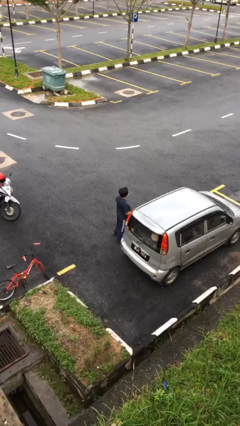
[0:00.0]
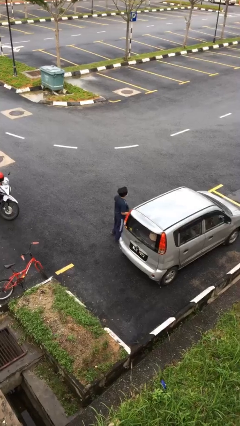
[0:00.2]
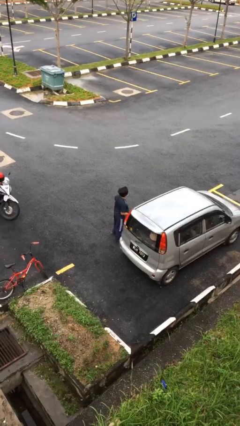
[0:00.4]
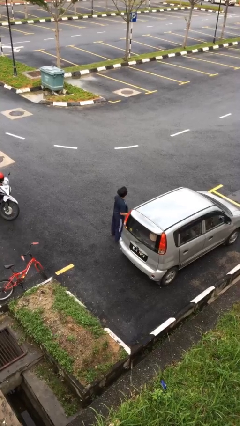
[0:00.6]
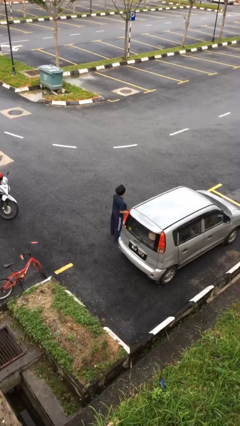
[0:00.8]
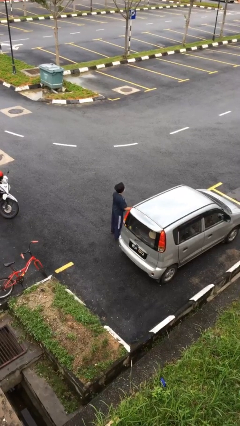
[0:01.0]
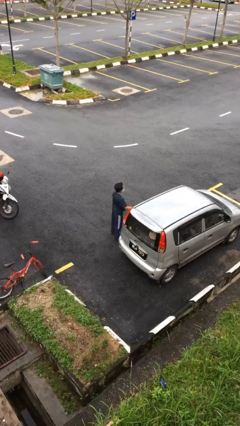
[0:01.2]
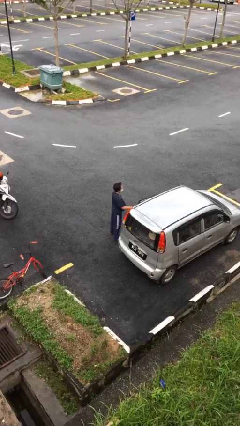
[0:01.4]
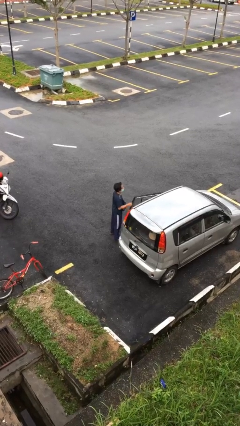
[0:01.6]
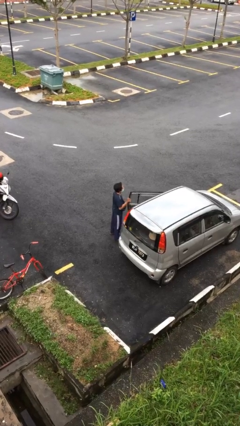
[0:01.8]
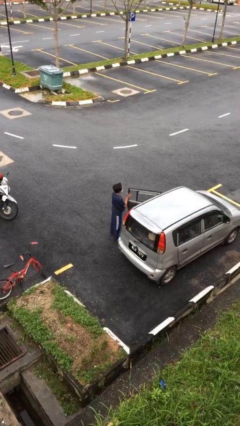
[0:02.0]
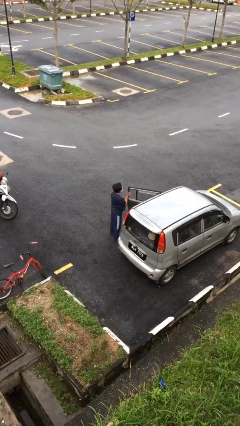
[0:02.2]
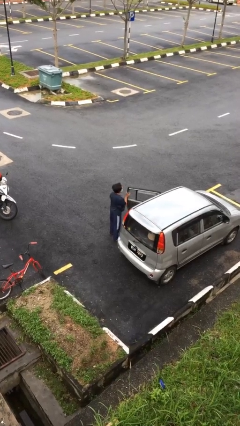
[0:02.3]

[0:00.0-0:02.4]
person opens car door

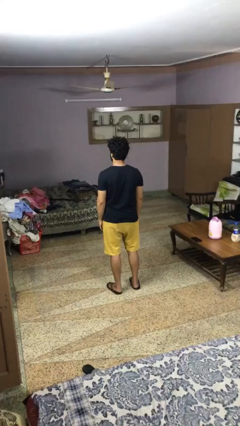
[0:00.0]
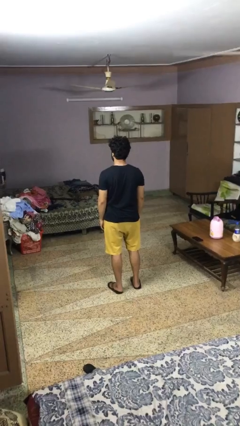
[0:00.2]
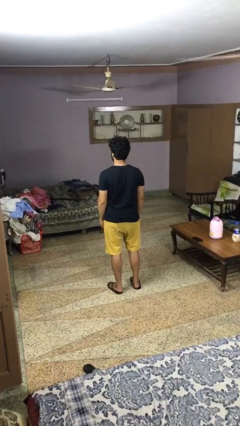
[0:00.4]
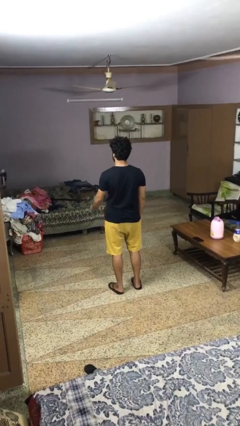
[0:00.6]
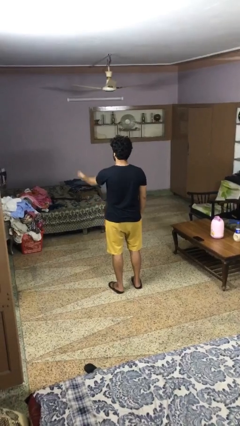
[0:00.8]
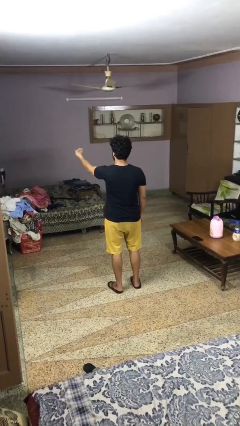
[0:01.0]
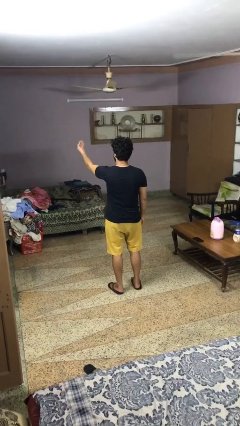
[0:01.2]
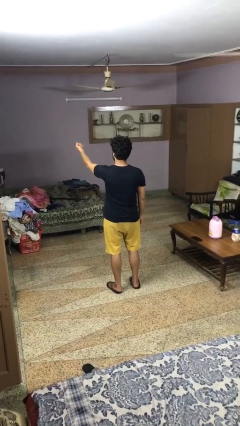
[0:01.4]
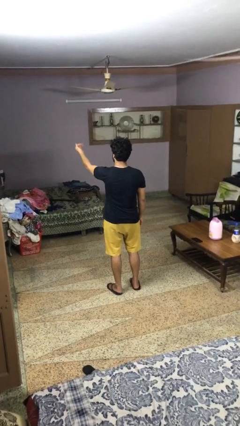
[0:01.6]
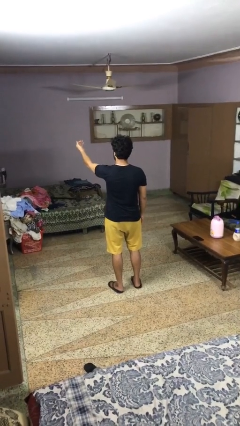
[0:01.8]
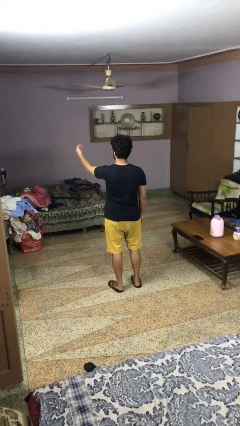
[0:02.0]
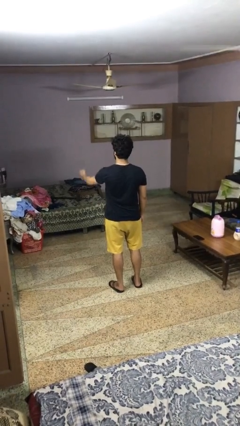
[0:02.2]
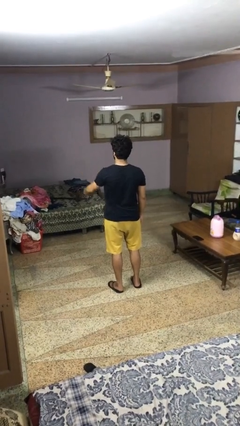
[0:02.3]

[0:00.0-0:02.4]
person gestures come here

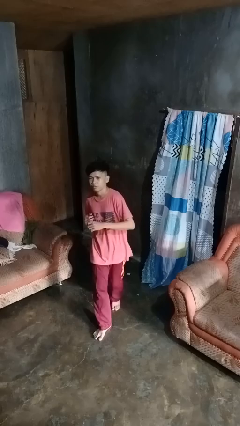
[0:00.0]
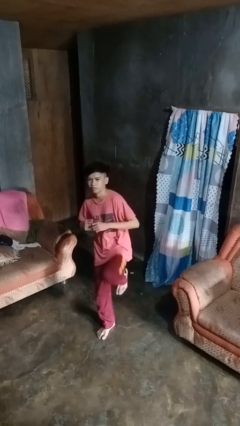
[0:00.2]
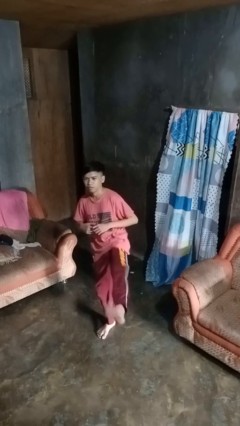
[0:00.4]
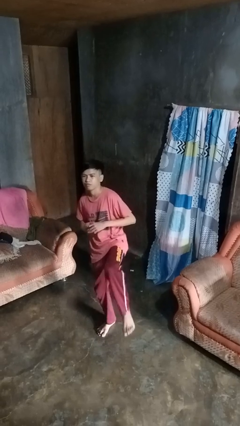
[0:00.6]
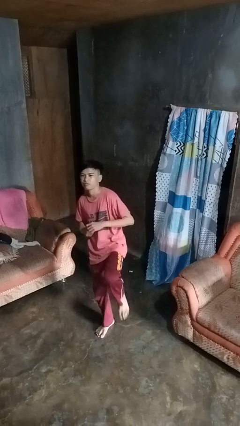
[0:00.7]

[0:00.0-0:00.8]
person karate kicks

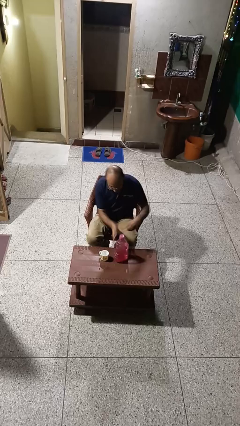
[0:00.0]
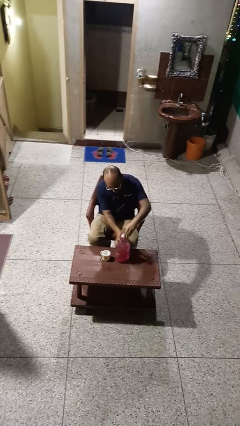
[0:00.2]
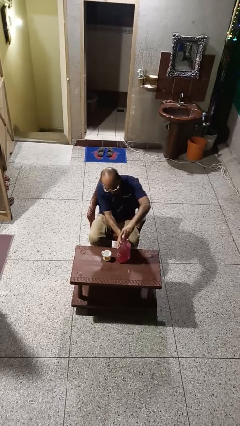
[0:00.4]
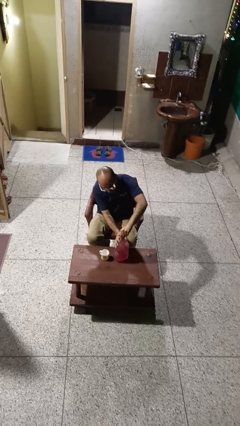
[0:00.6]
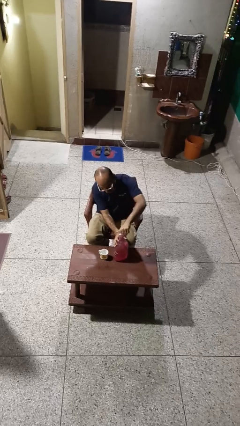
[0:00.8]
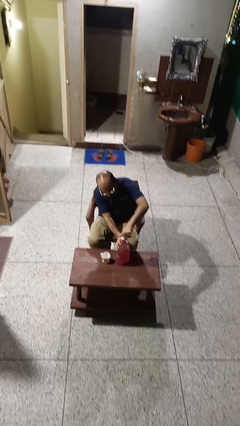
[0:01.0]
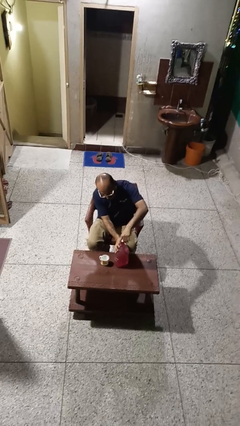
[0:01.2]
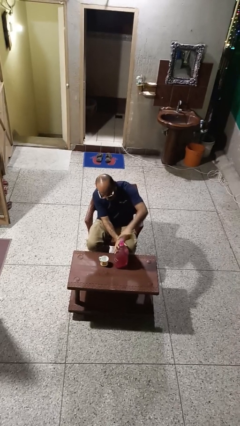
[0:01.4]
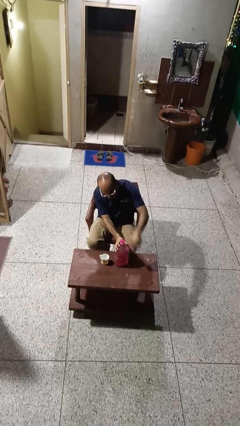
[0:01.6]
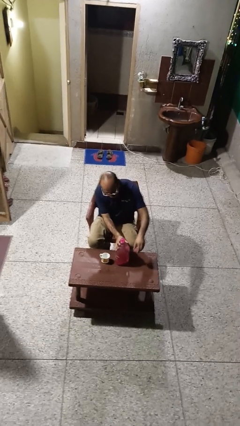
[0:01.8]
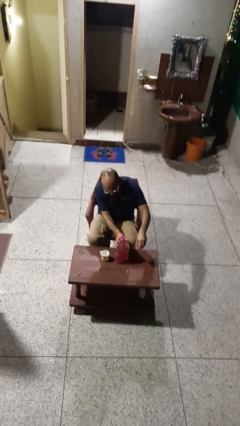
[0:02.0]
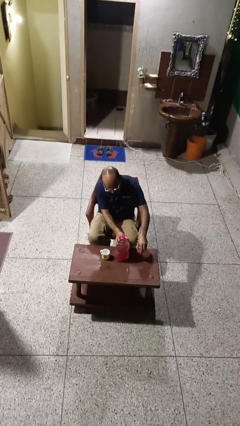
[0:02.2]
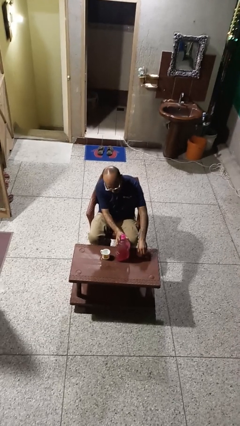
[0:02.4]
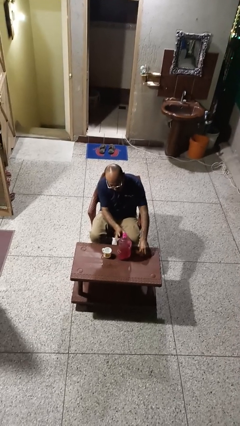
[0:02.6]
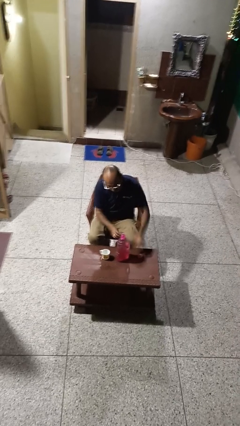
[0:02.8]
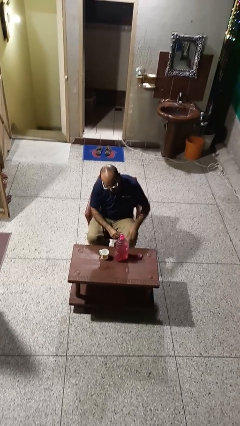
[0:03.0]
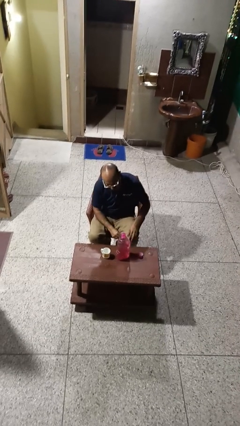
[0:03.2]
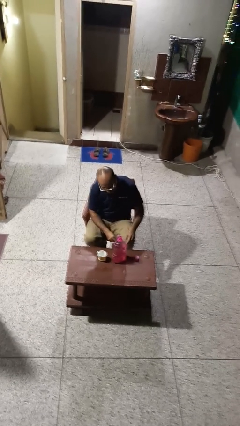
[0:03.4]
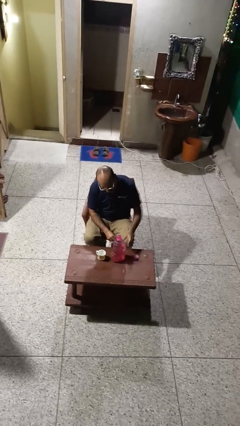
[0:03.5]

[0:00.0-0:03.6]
person unscrews lid from bottle

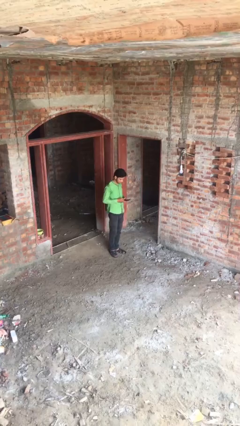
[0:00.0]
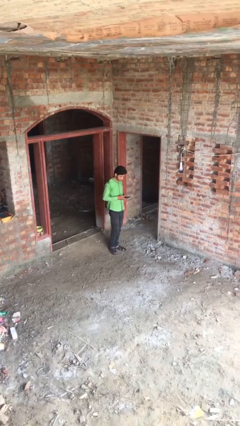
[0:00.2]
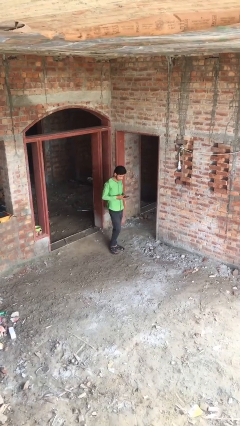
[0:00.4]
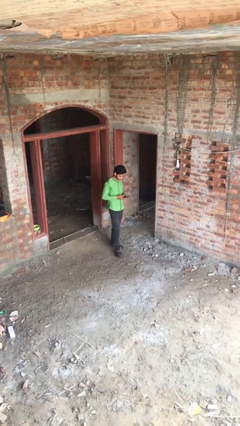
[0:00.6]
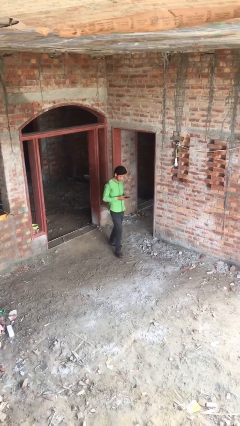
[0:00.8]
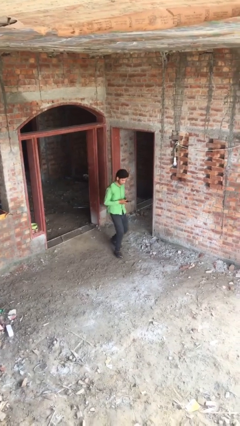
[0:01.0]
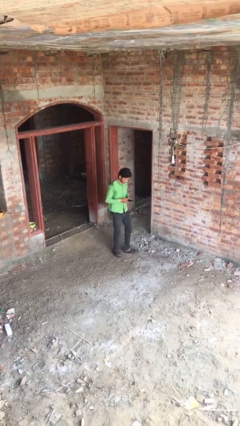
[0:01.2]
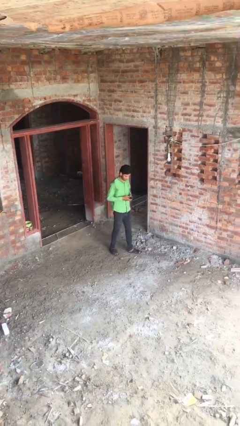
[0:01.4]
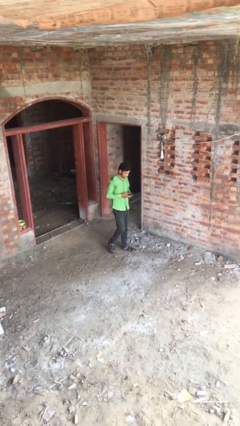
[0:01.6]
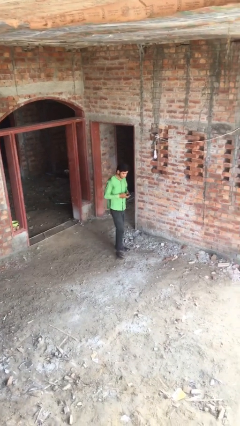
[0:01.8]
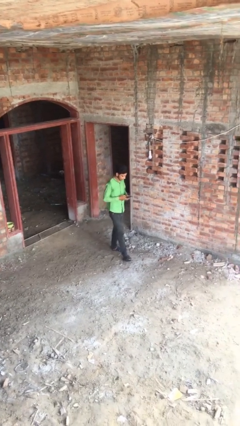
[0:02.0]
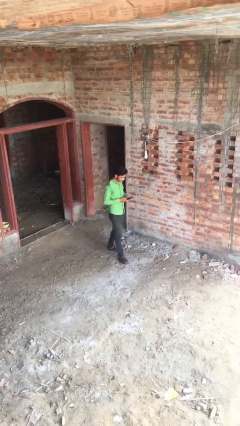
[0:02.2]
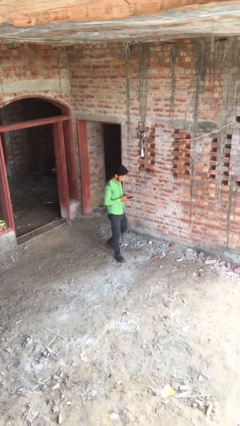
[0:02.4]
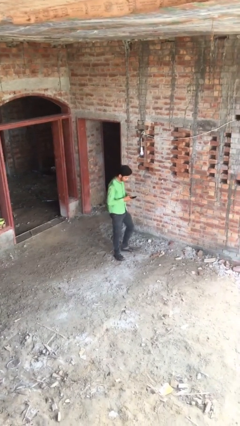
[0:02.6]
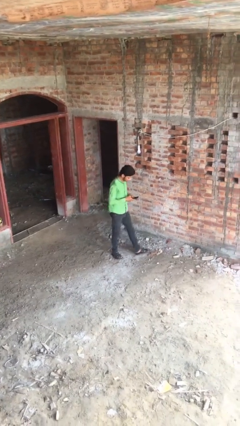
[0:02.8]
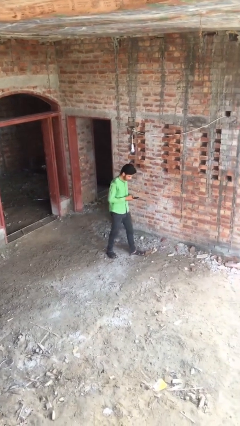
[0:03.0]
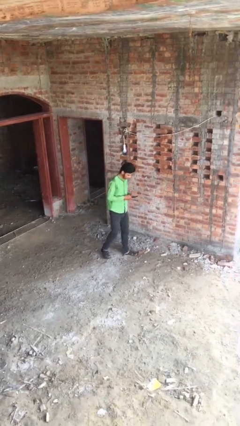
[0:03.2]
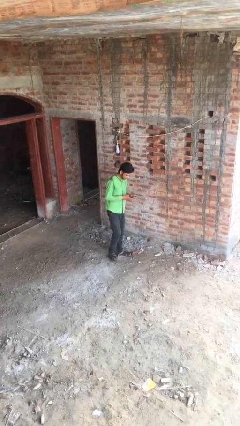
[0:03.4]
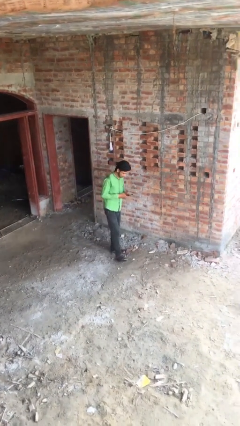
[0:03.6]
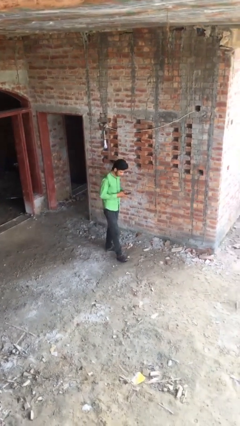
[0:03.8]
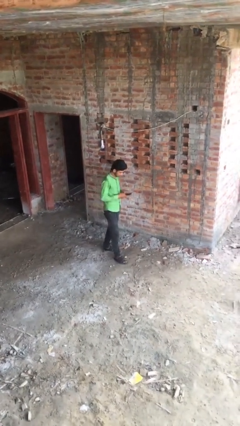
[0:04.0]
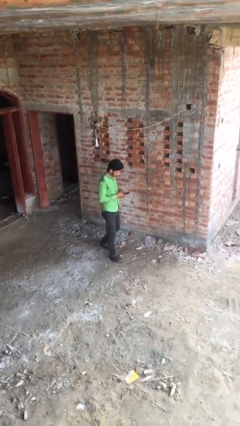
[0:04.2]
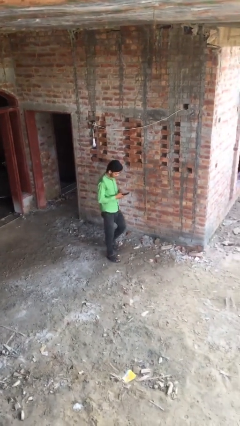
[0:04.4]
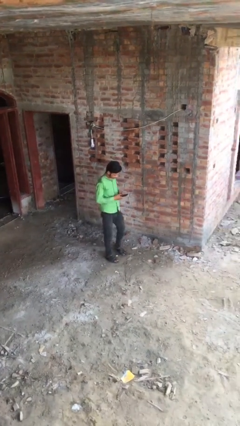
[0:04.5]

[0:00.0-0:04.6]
person texts on phone

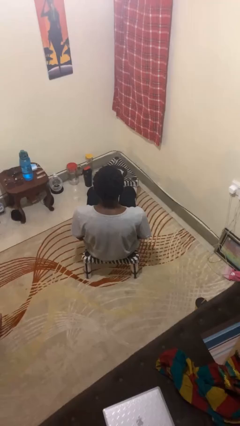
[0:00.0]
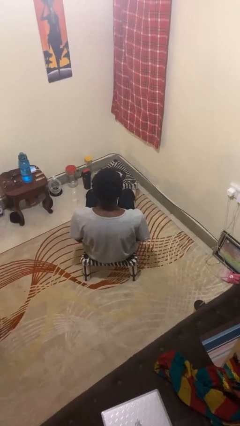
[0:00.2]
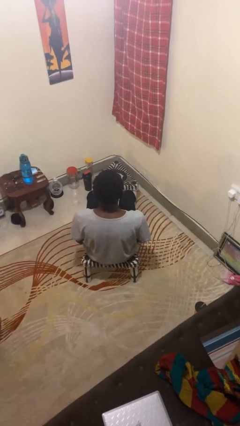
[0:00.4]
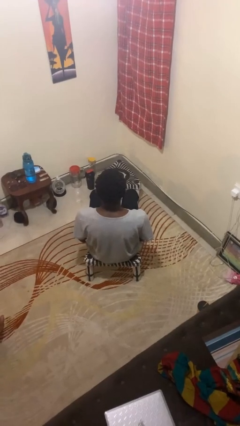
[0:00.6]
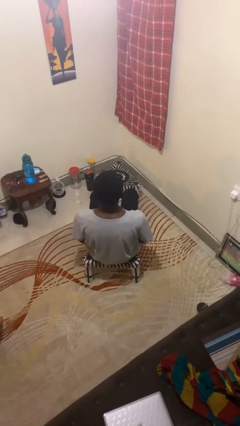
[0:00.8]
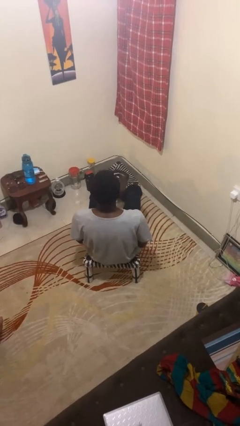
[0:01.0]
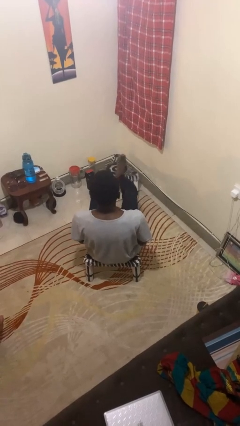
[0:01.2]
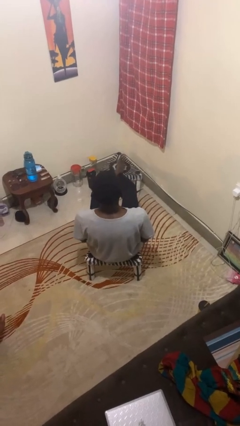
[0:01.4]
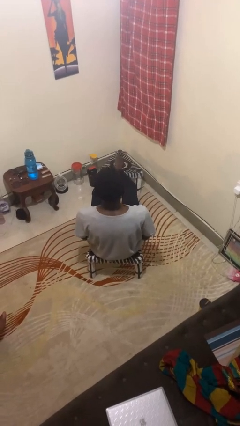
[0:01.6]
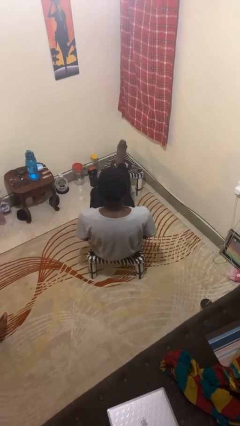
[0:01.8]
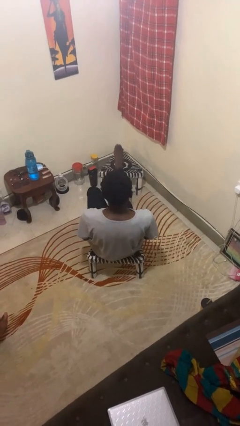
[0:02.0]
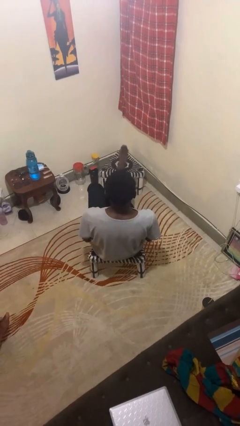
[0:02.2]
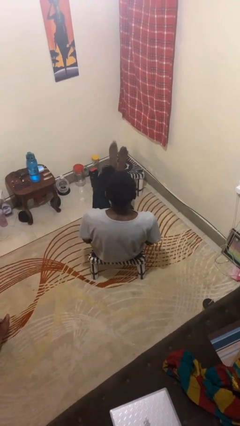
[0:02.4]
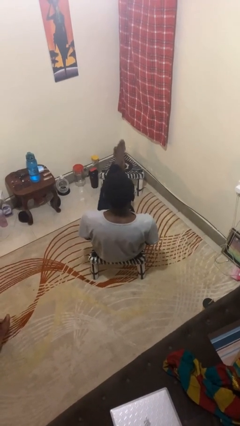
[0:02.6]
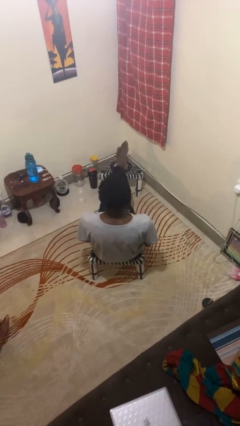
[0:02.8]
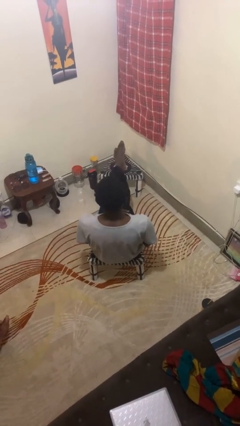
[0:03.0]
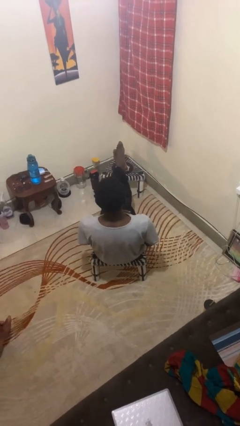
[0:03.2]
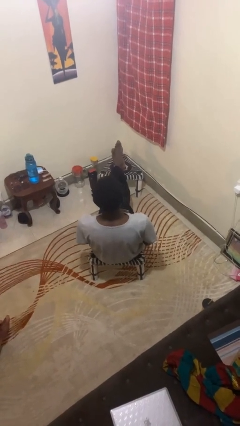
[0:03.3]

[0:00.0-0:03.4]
person puts feet up

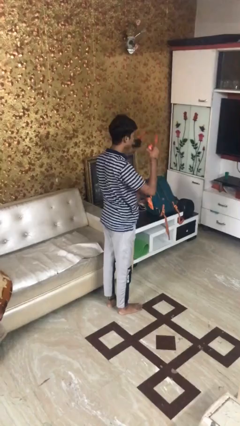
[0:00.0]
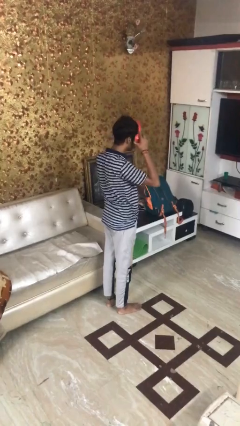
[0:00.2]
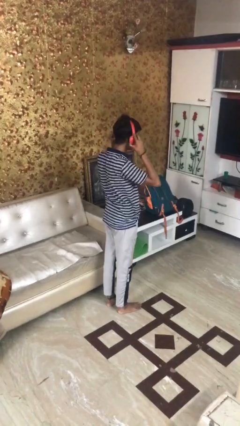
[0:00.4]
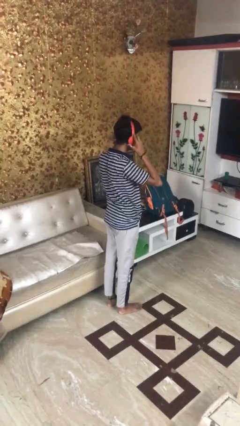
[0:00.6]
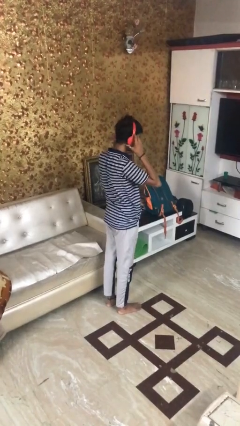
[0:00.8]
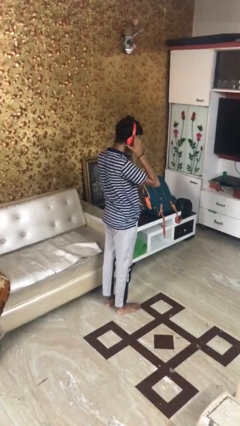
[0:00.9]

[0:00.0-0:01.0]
person puts on headphones
